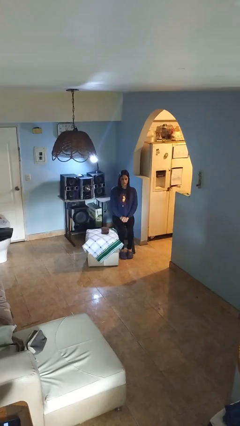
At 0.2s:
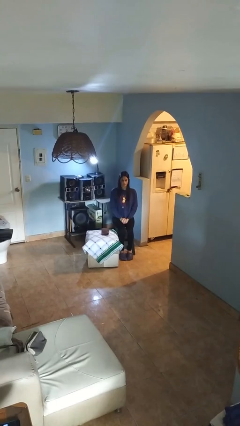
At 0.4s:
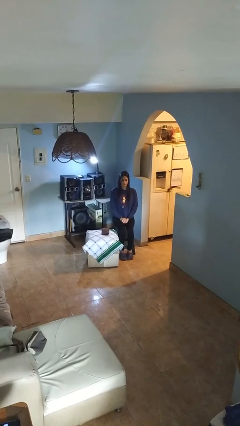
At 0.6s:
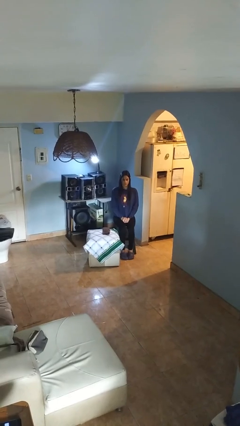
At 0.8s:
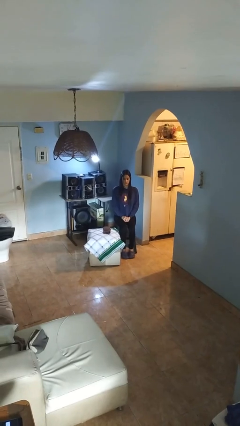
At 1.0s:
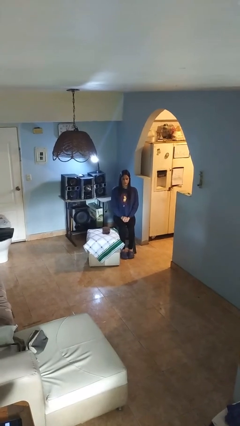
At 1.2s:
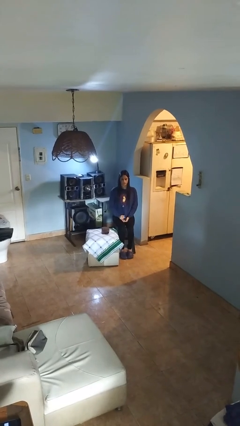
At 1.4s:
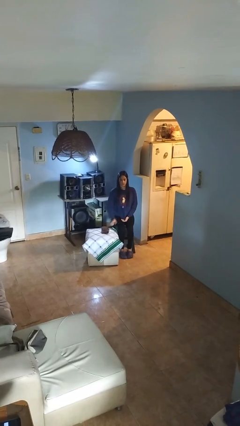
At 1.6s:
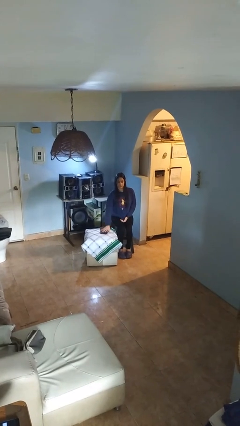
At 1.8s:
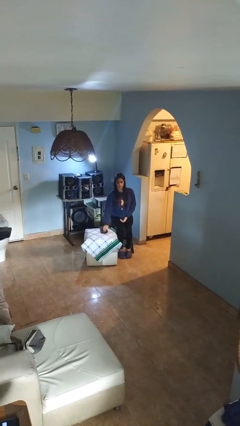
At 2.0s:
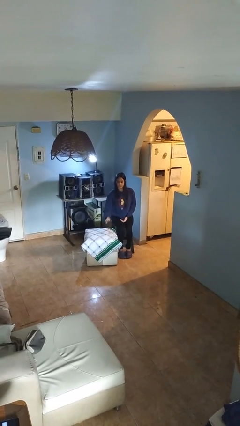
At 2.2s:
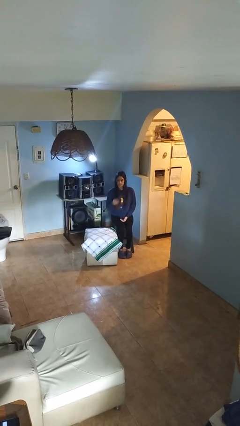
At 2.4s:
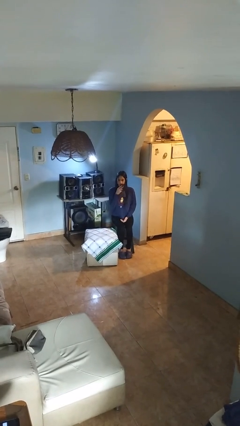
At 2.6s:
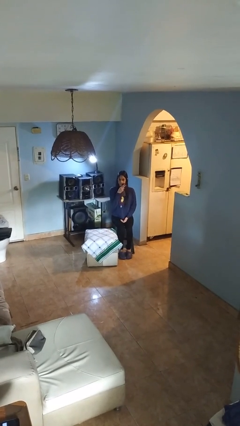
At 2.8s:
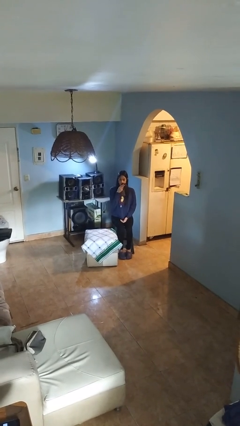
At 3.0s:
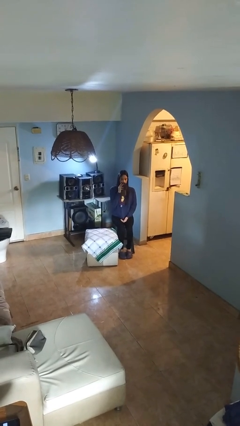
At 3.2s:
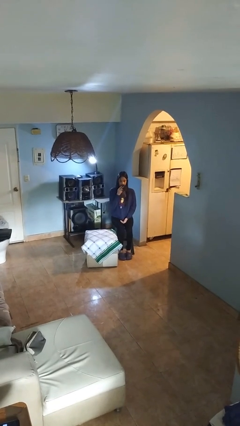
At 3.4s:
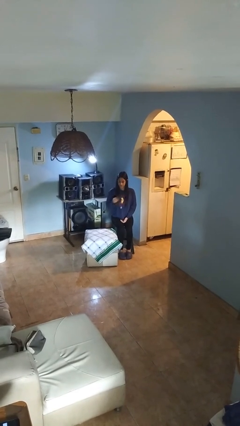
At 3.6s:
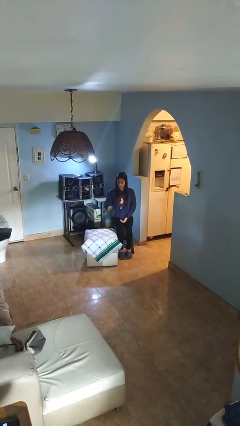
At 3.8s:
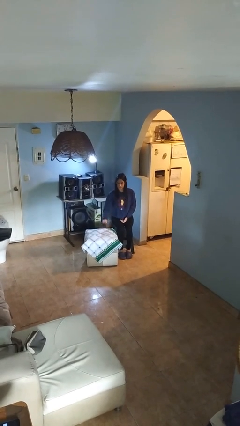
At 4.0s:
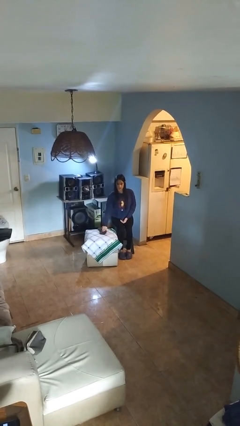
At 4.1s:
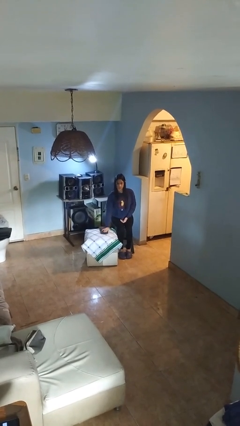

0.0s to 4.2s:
person wipes mouth with napkin

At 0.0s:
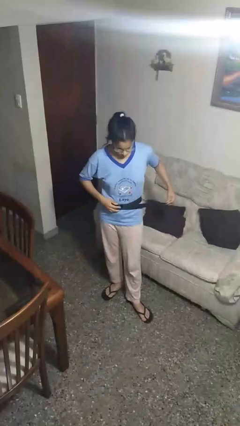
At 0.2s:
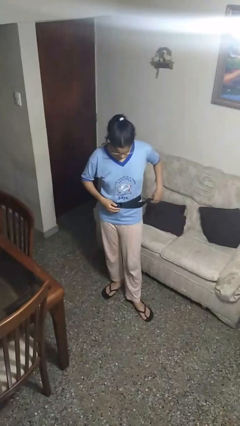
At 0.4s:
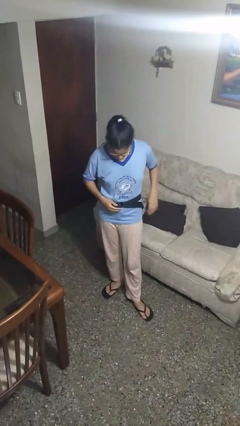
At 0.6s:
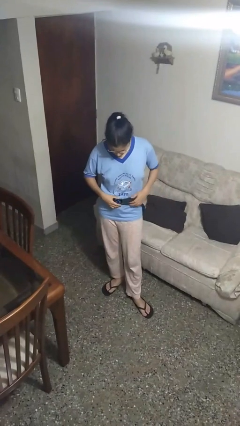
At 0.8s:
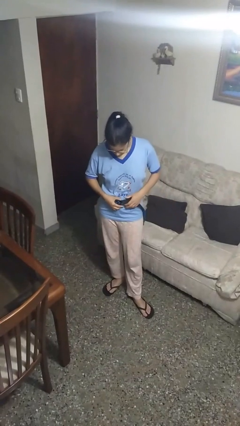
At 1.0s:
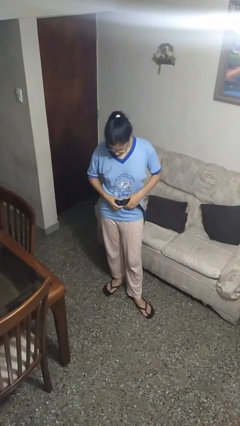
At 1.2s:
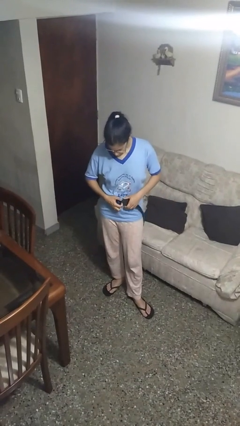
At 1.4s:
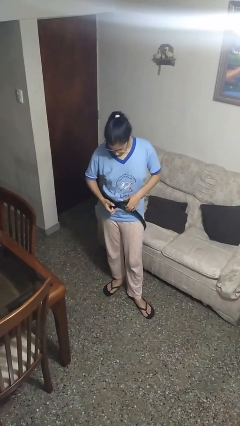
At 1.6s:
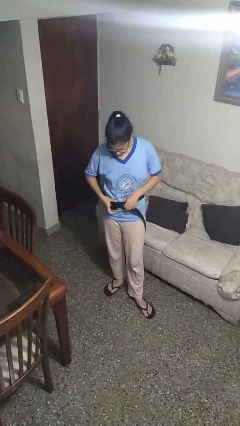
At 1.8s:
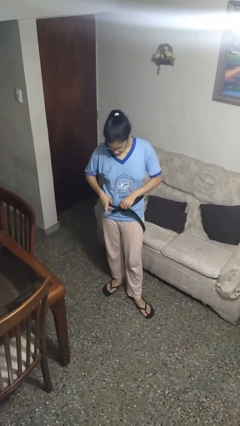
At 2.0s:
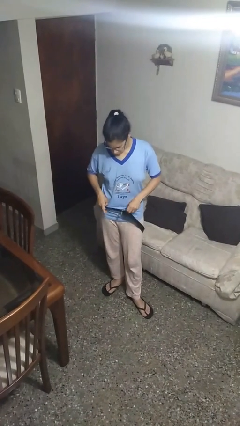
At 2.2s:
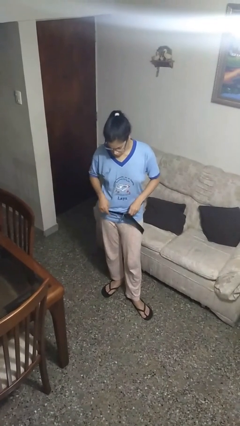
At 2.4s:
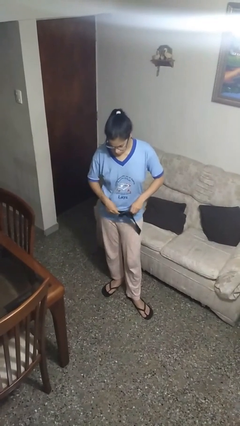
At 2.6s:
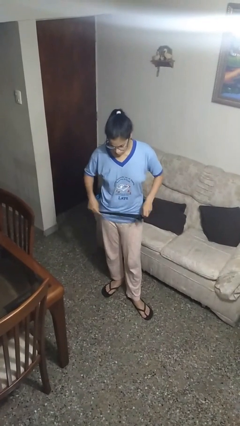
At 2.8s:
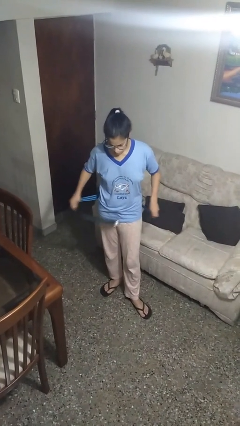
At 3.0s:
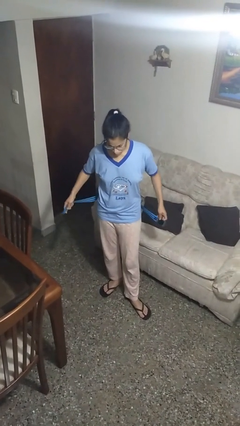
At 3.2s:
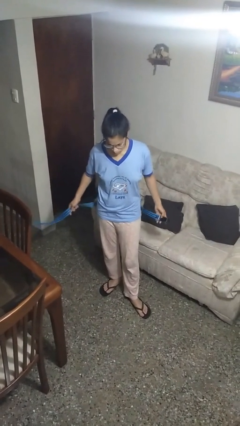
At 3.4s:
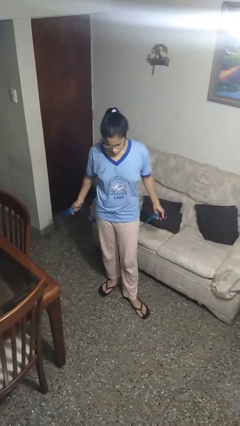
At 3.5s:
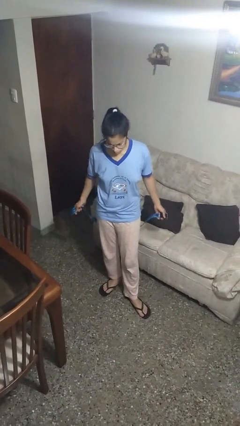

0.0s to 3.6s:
person takes off belt

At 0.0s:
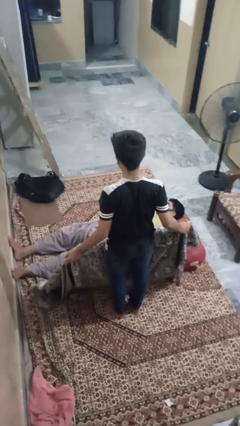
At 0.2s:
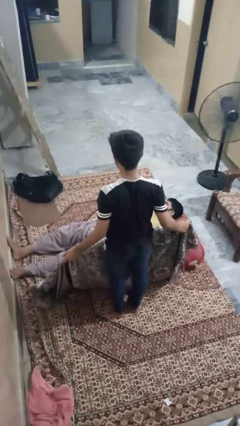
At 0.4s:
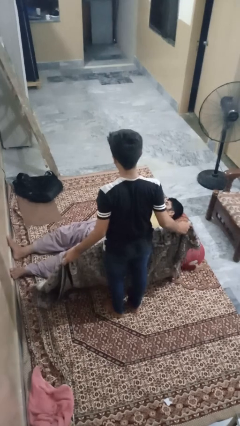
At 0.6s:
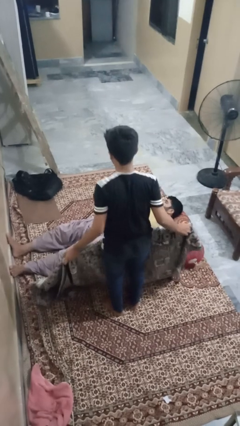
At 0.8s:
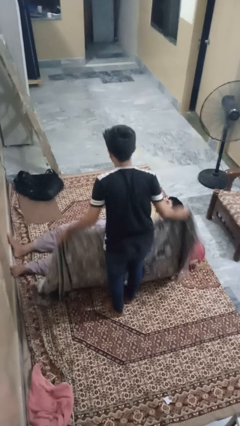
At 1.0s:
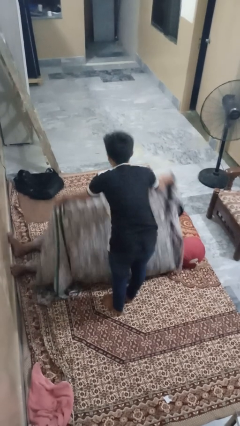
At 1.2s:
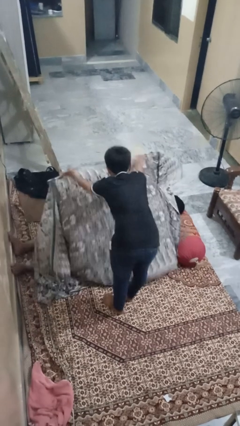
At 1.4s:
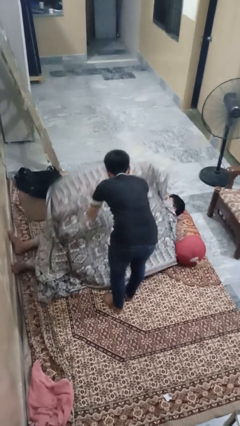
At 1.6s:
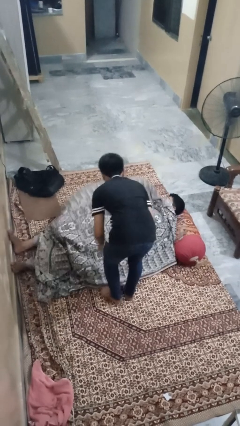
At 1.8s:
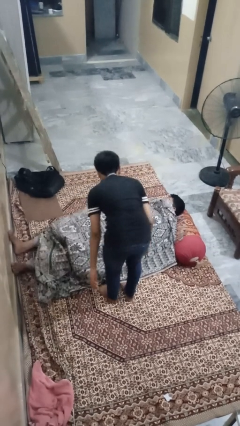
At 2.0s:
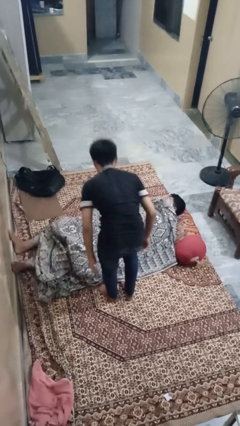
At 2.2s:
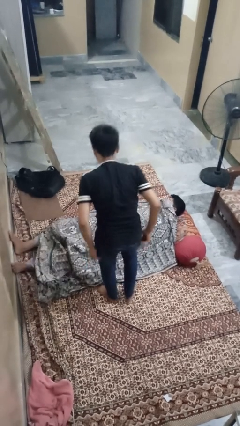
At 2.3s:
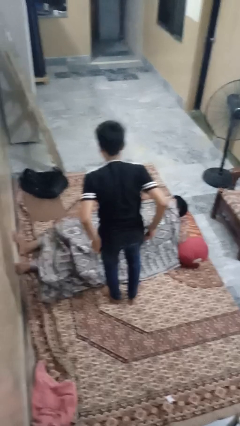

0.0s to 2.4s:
person covers friend with blanket

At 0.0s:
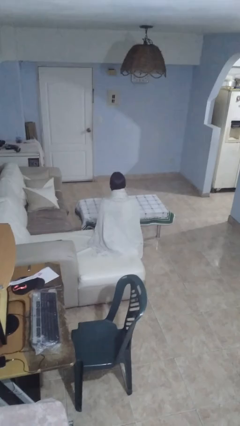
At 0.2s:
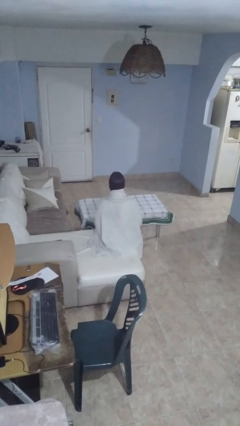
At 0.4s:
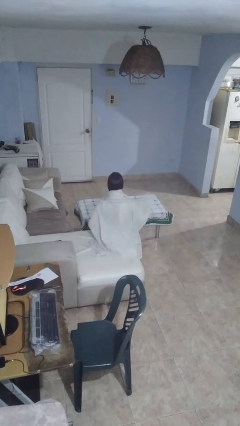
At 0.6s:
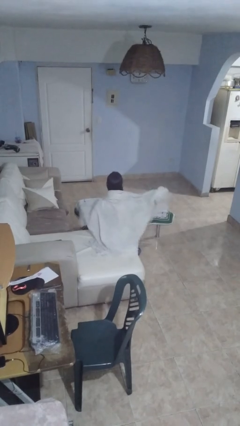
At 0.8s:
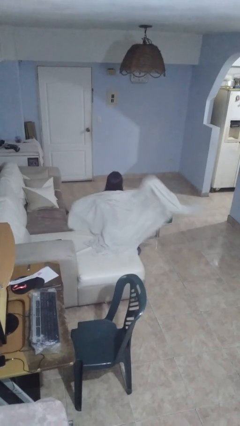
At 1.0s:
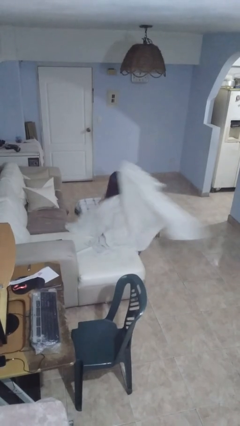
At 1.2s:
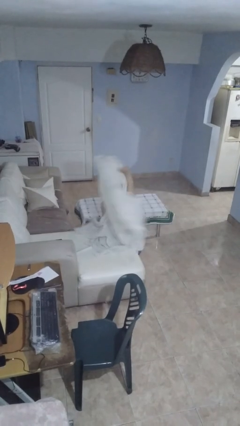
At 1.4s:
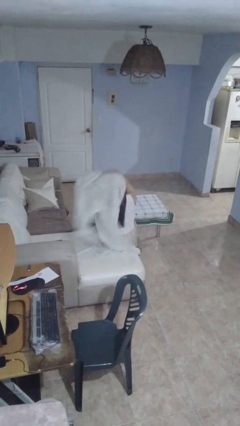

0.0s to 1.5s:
person uncovers with blanket

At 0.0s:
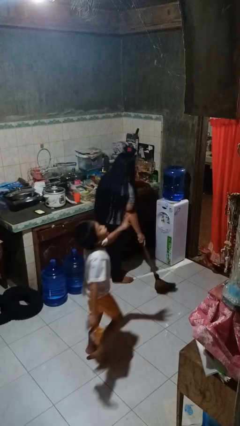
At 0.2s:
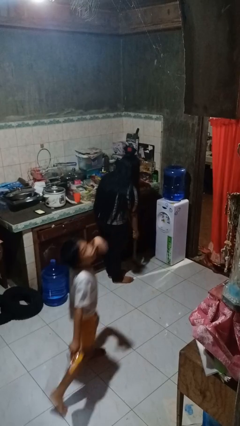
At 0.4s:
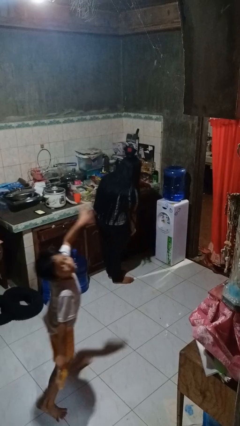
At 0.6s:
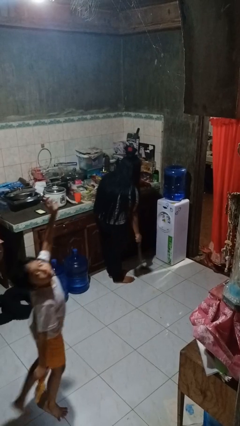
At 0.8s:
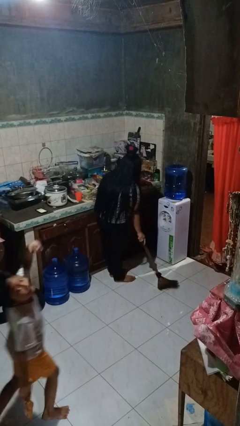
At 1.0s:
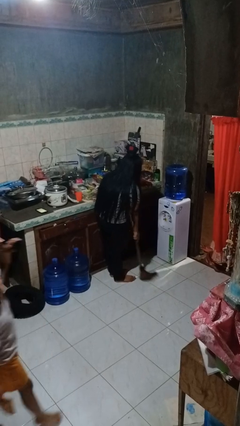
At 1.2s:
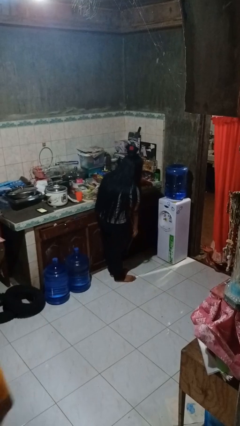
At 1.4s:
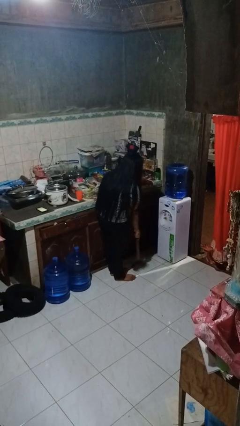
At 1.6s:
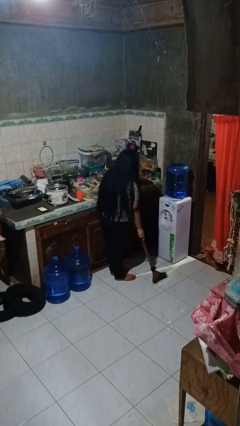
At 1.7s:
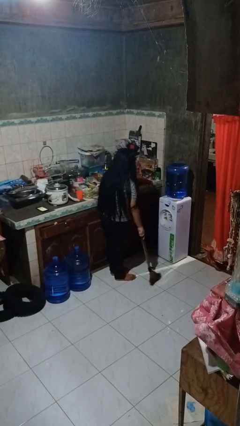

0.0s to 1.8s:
person sweeps floor

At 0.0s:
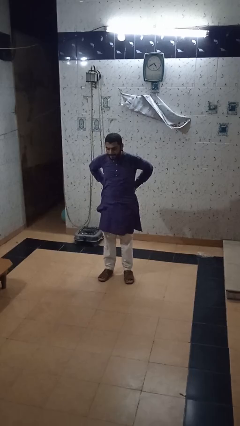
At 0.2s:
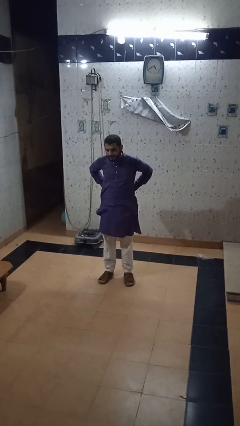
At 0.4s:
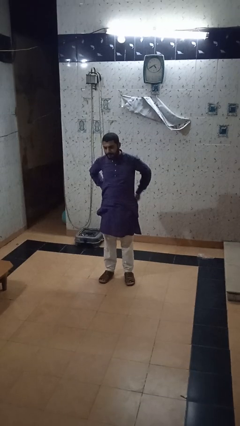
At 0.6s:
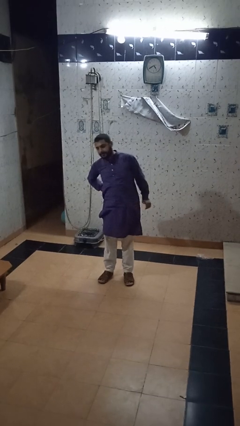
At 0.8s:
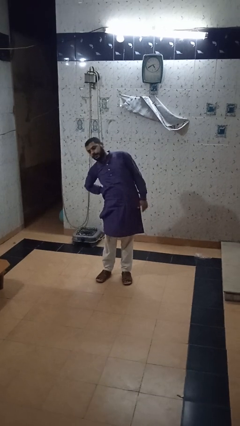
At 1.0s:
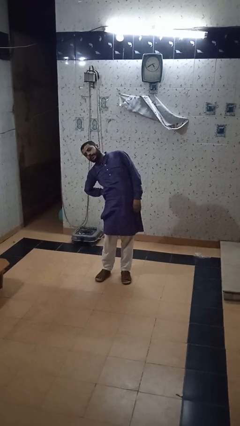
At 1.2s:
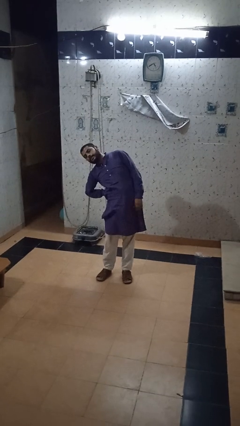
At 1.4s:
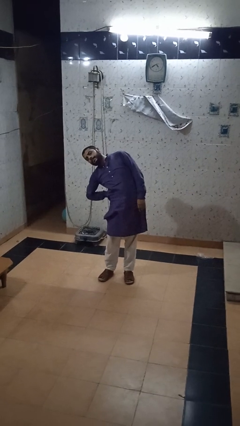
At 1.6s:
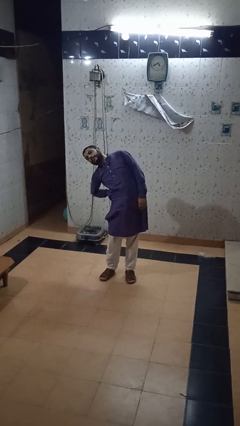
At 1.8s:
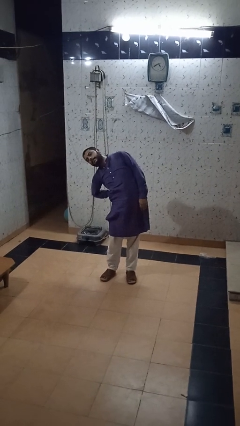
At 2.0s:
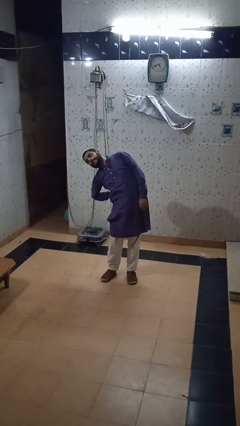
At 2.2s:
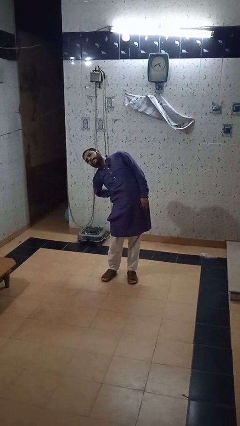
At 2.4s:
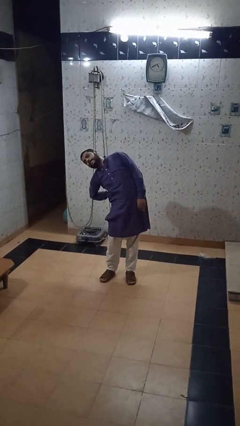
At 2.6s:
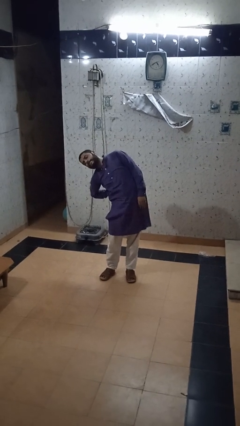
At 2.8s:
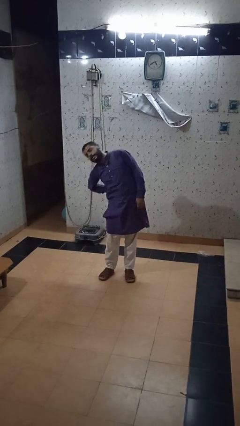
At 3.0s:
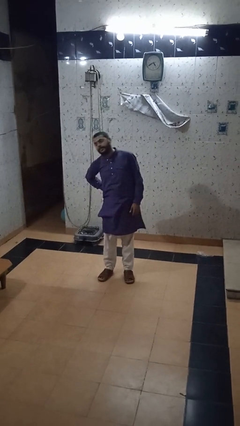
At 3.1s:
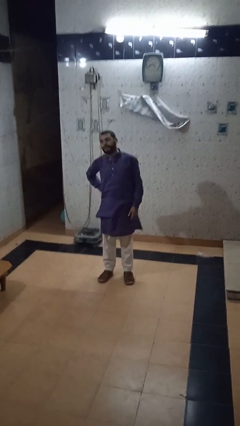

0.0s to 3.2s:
person stretches arms to side

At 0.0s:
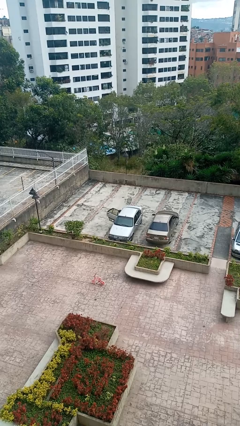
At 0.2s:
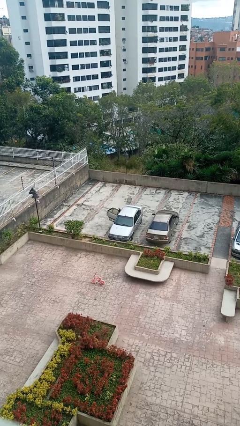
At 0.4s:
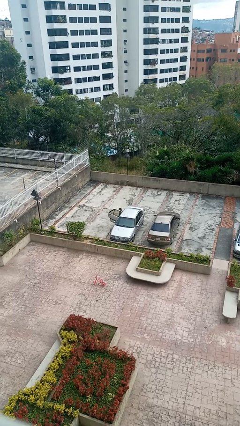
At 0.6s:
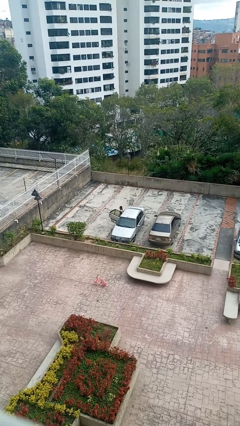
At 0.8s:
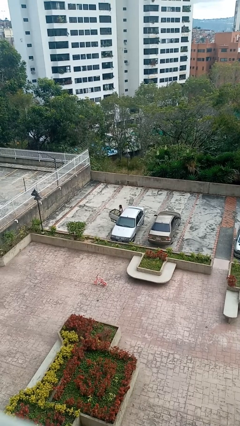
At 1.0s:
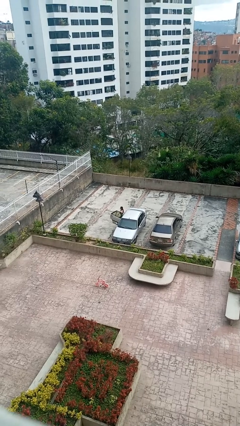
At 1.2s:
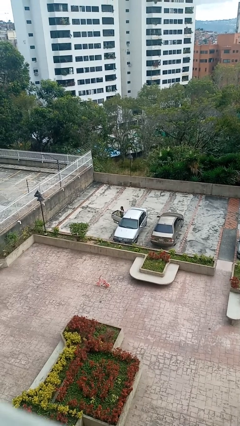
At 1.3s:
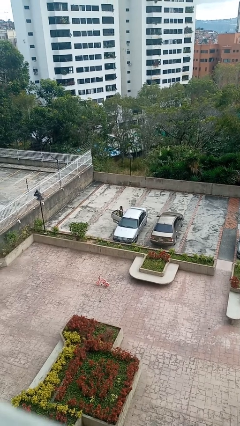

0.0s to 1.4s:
person exits car
